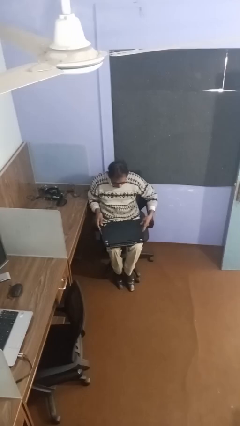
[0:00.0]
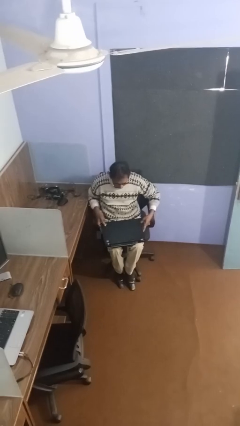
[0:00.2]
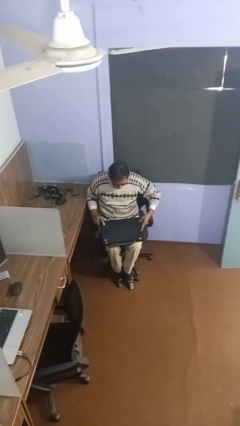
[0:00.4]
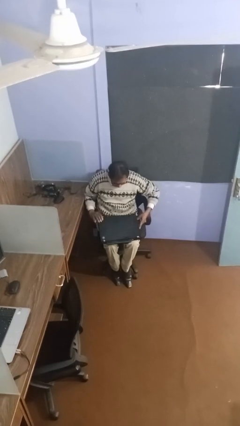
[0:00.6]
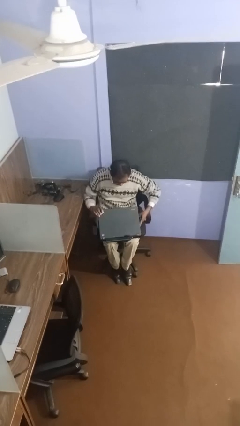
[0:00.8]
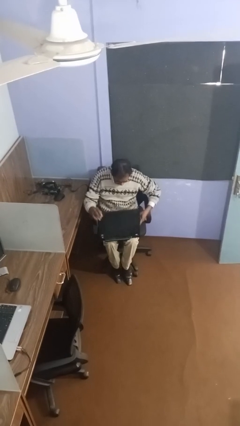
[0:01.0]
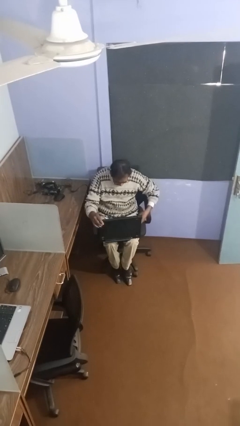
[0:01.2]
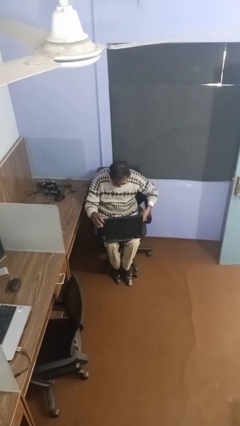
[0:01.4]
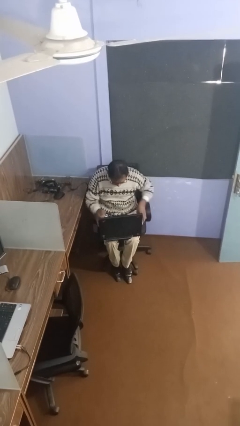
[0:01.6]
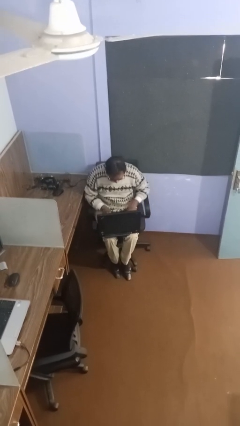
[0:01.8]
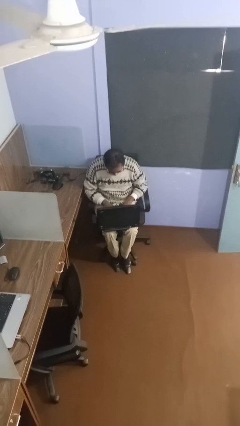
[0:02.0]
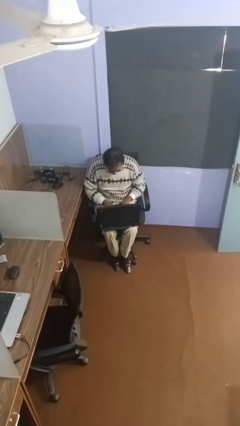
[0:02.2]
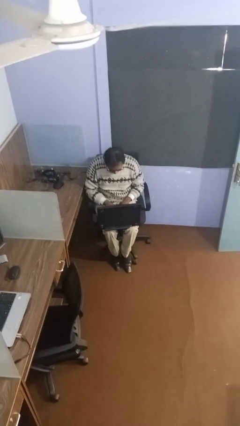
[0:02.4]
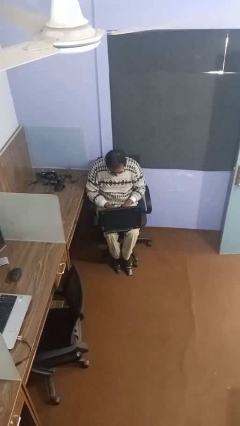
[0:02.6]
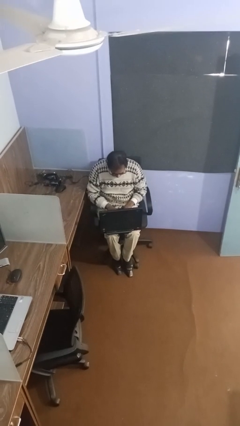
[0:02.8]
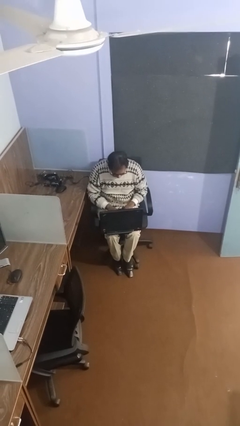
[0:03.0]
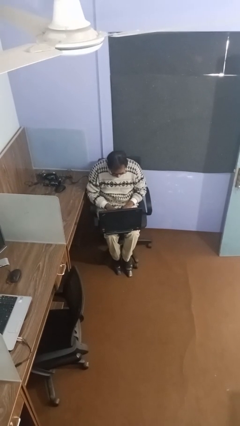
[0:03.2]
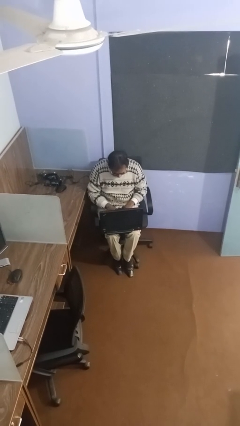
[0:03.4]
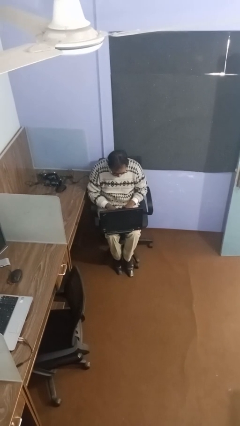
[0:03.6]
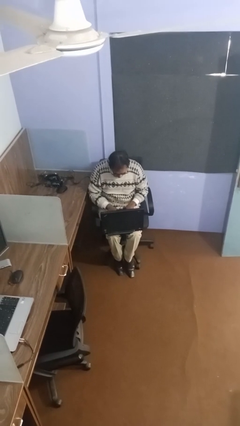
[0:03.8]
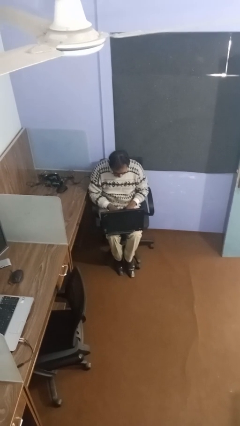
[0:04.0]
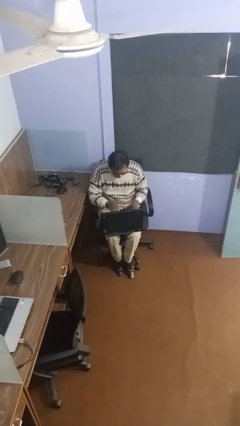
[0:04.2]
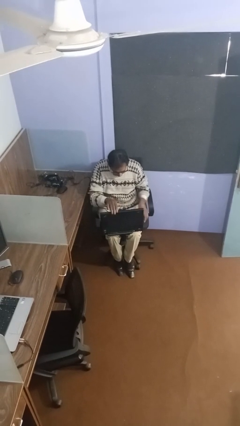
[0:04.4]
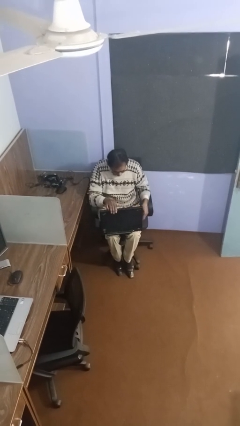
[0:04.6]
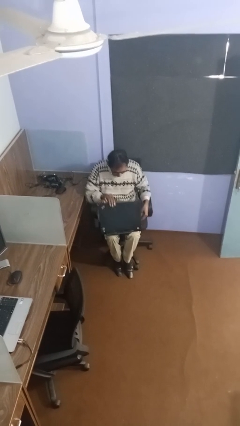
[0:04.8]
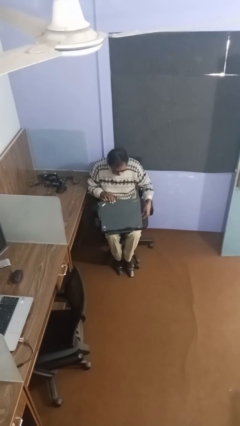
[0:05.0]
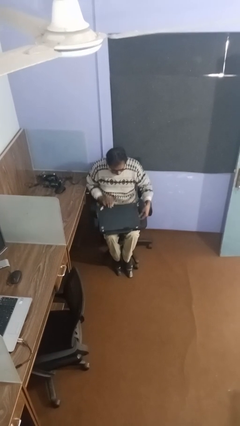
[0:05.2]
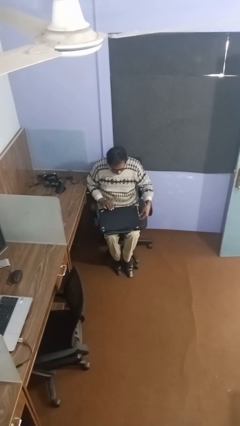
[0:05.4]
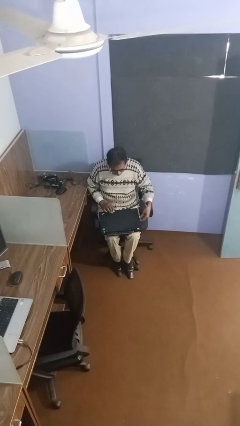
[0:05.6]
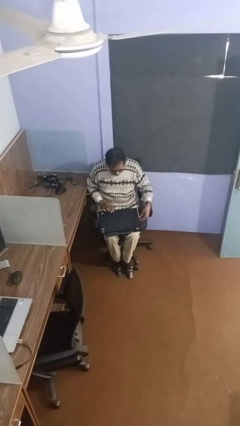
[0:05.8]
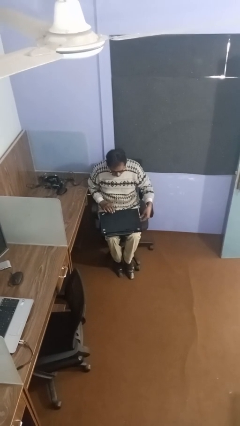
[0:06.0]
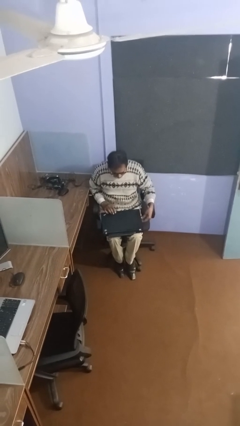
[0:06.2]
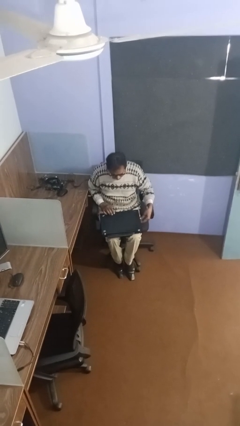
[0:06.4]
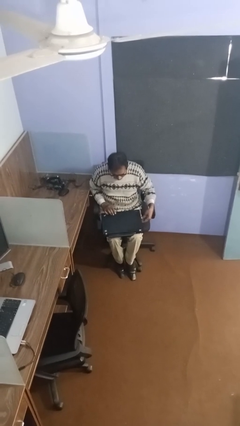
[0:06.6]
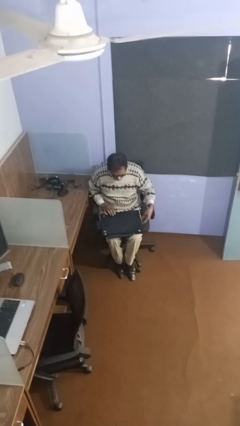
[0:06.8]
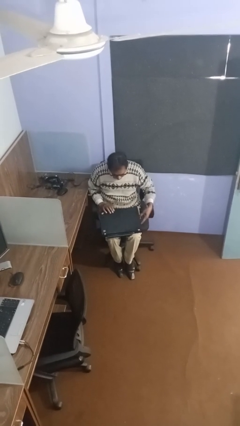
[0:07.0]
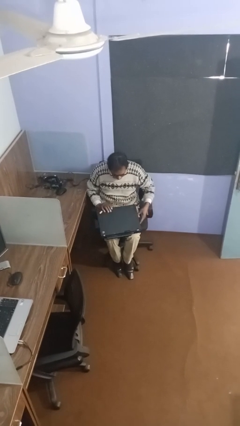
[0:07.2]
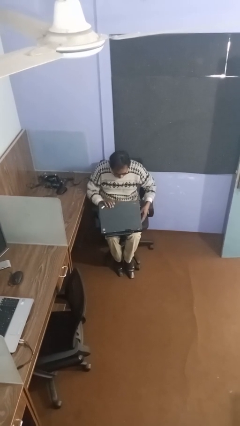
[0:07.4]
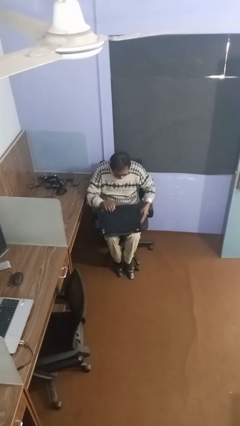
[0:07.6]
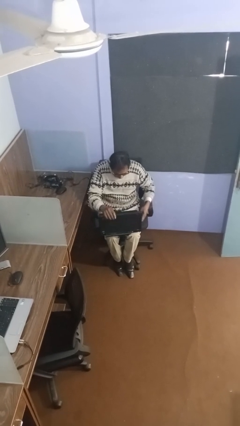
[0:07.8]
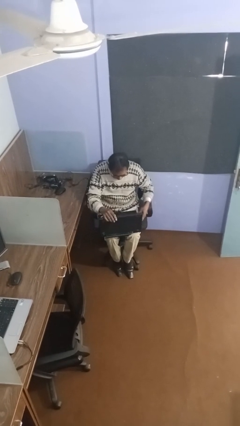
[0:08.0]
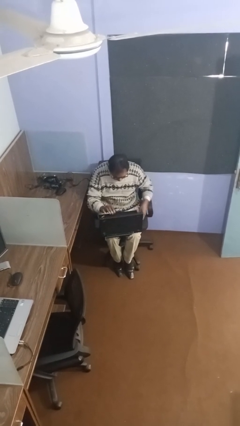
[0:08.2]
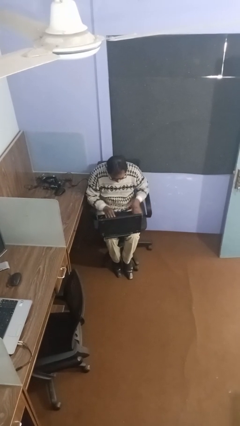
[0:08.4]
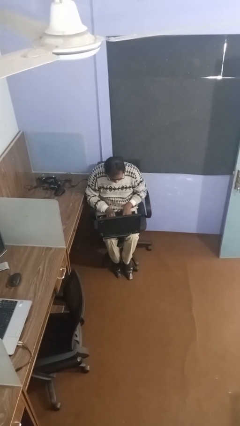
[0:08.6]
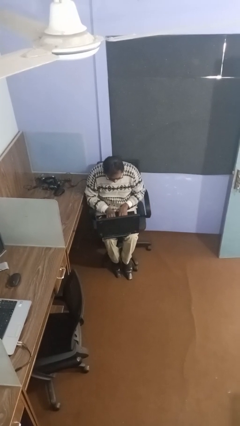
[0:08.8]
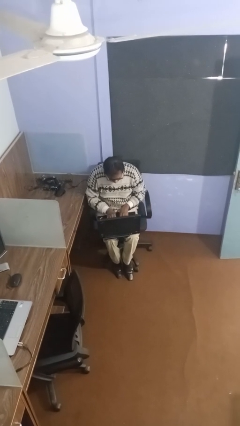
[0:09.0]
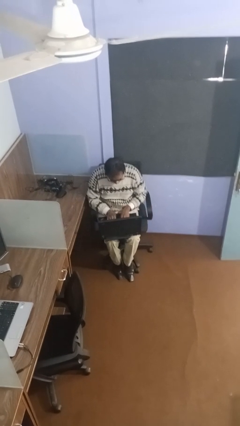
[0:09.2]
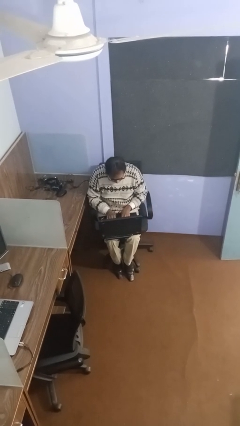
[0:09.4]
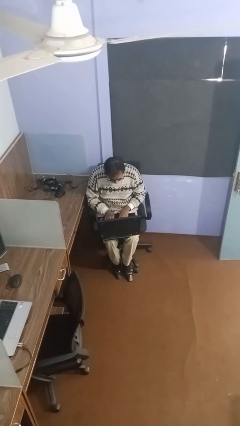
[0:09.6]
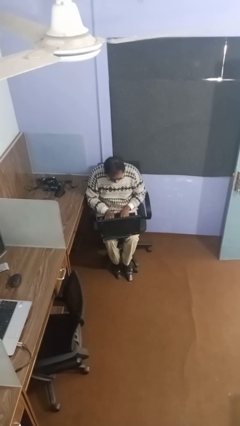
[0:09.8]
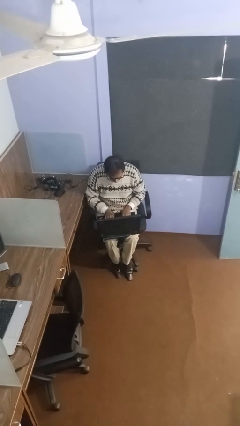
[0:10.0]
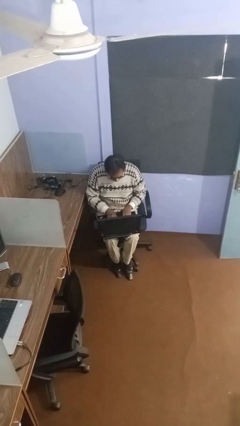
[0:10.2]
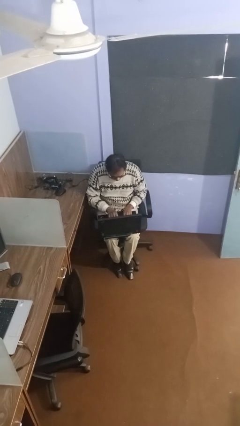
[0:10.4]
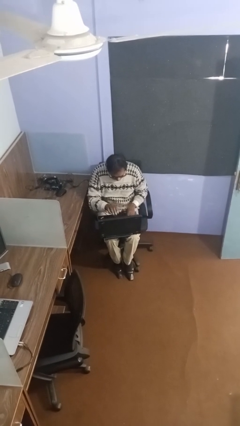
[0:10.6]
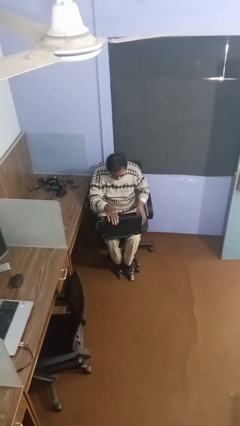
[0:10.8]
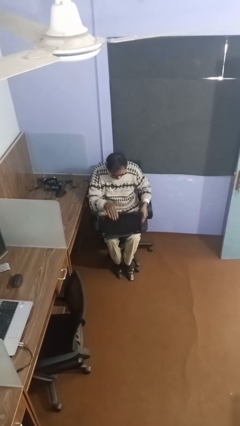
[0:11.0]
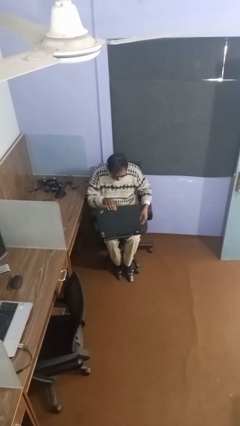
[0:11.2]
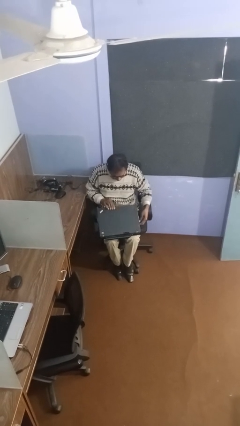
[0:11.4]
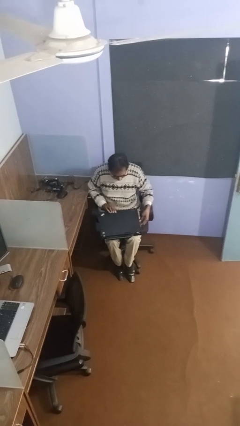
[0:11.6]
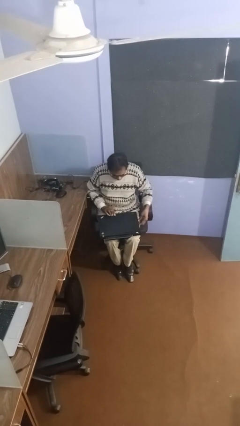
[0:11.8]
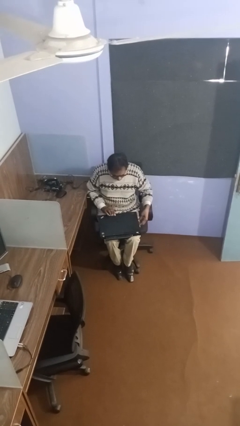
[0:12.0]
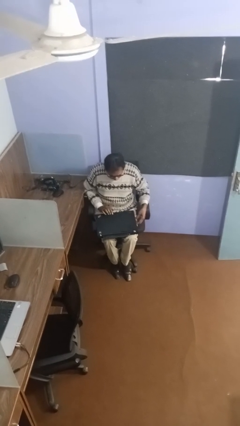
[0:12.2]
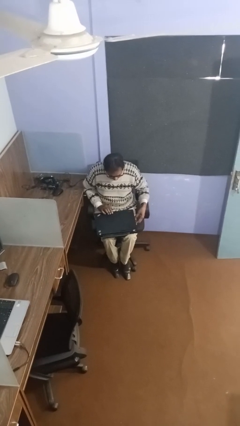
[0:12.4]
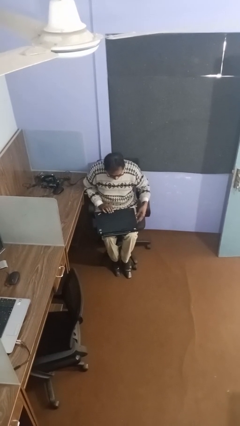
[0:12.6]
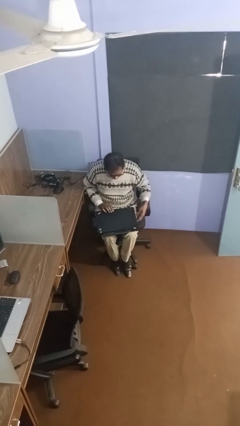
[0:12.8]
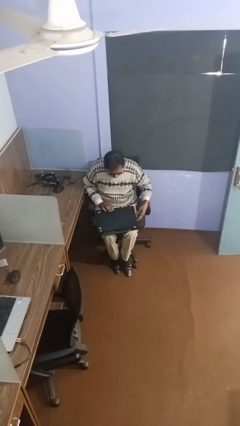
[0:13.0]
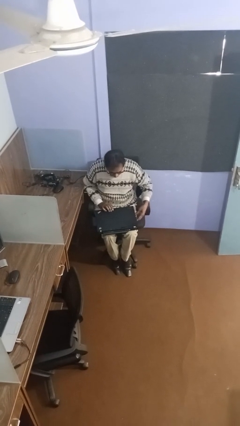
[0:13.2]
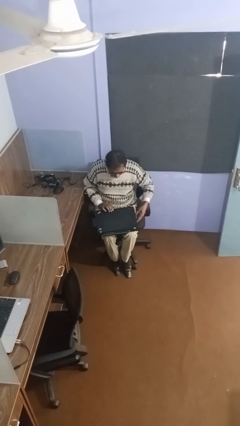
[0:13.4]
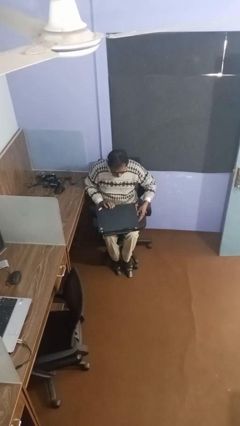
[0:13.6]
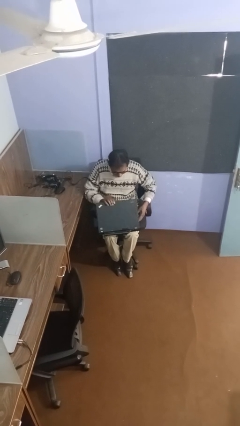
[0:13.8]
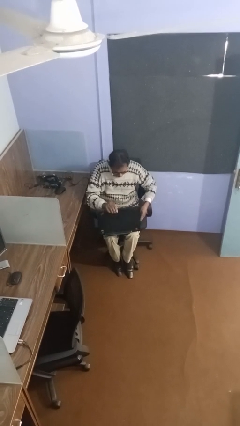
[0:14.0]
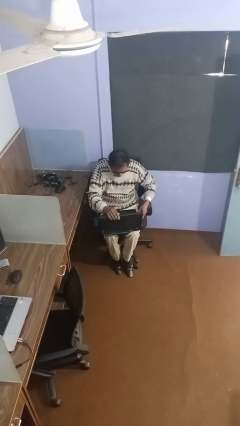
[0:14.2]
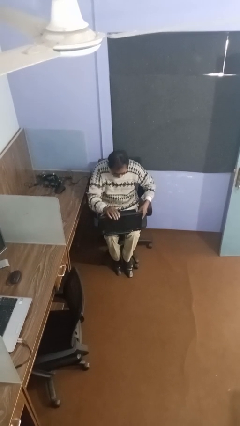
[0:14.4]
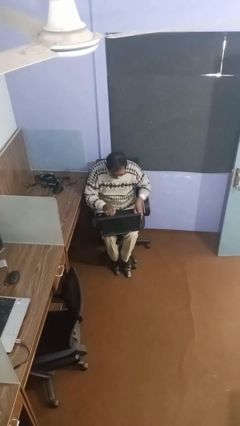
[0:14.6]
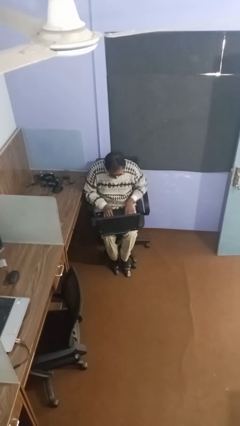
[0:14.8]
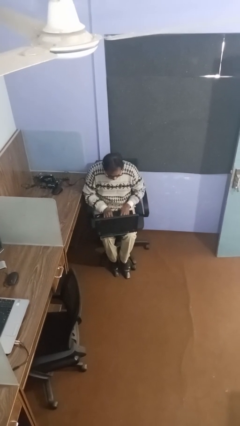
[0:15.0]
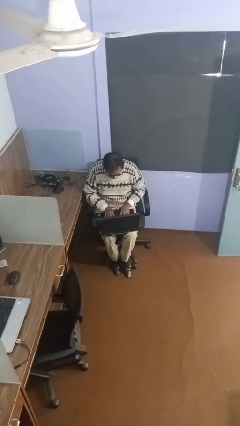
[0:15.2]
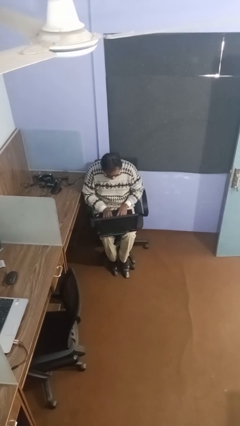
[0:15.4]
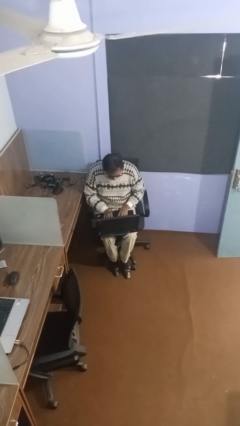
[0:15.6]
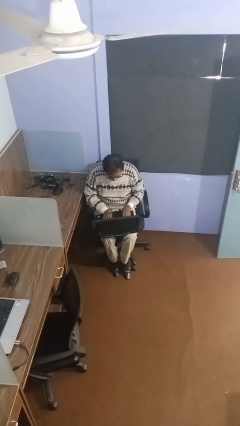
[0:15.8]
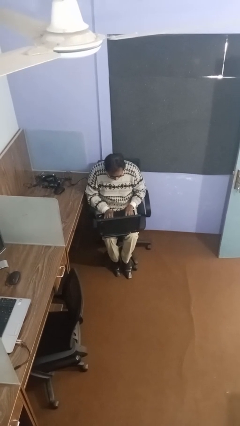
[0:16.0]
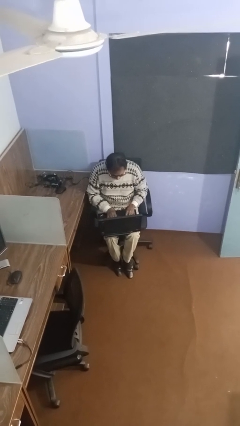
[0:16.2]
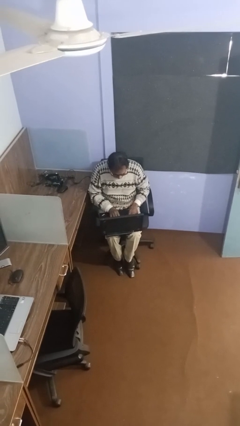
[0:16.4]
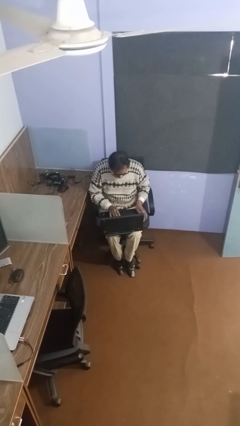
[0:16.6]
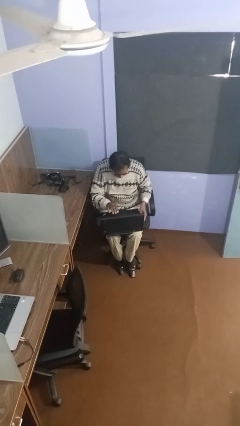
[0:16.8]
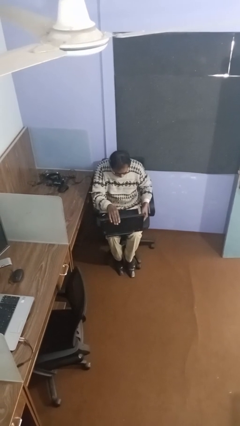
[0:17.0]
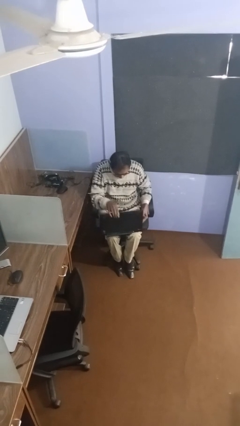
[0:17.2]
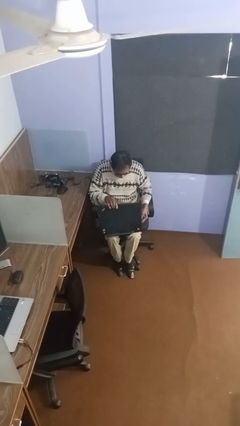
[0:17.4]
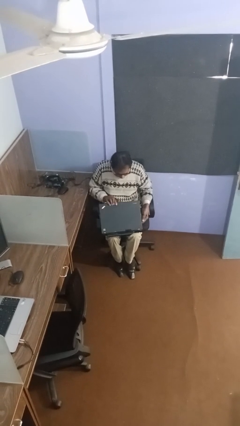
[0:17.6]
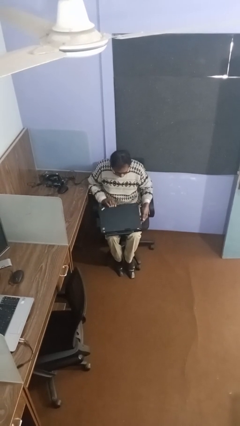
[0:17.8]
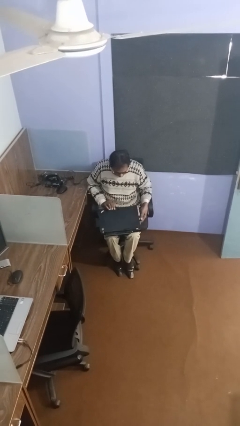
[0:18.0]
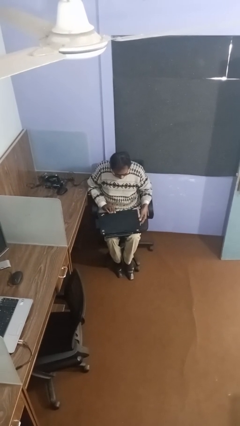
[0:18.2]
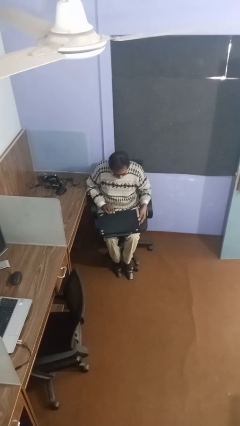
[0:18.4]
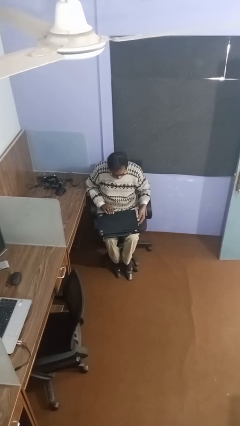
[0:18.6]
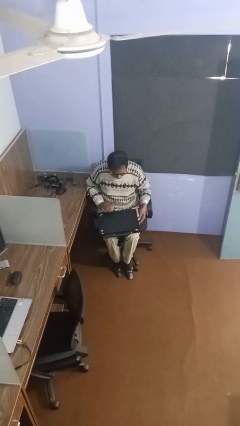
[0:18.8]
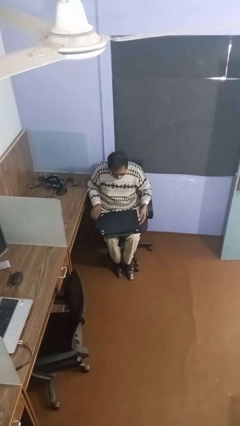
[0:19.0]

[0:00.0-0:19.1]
person interacts with laptop
